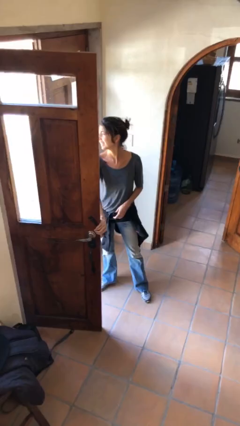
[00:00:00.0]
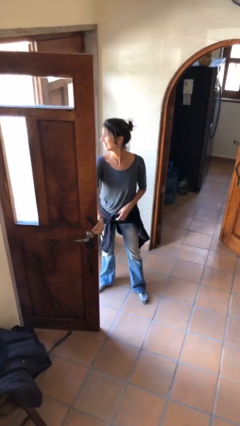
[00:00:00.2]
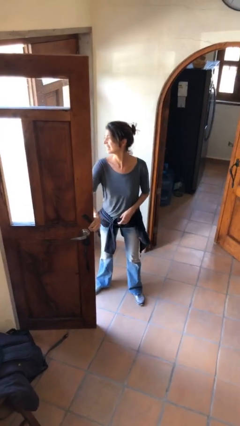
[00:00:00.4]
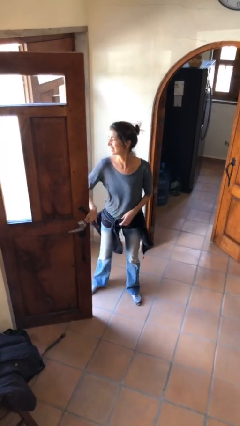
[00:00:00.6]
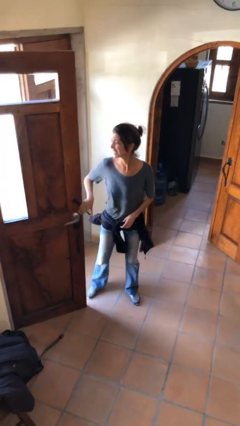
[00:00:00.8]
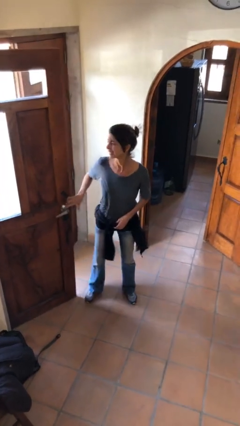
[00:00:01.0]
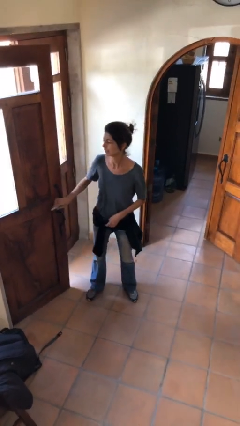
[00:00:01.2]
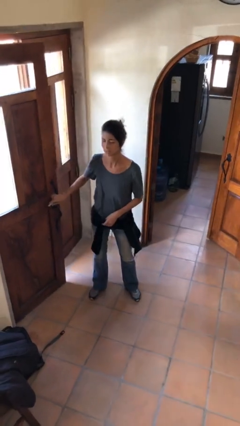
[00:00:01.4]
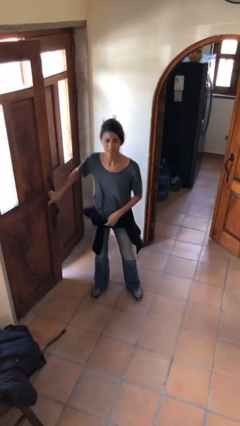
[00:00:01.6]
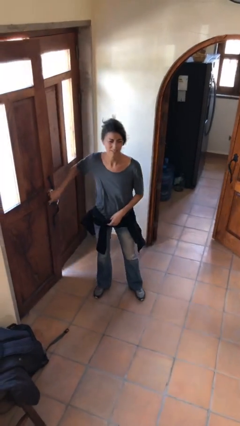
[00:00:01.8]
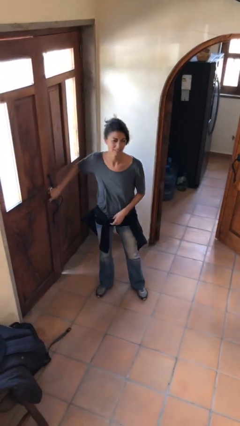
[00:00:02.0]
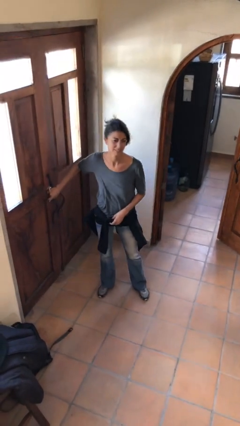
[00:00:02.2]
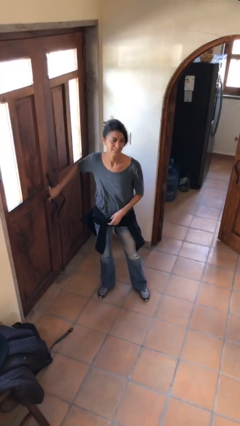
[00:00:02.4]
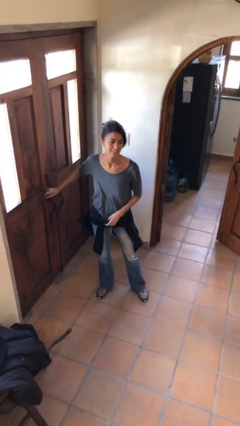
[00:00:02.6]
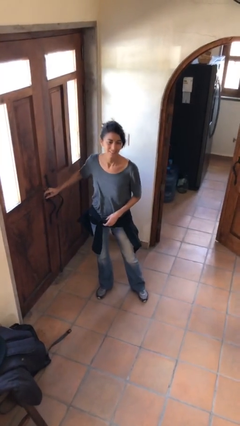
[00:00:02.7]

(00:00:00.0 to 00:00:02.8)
person closes facility door

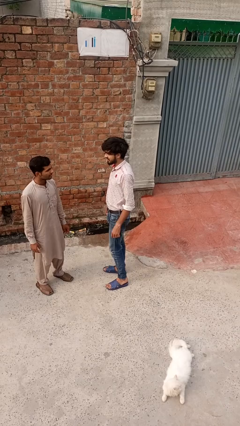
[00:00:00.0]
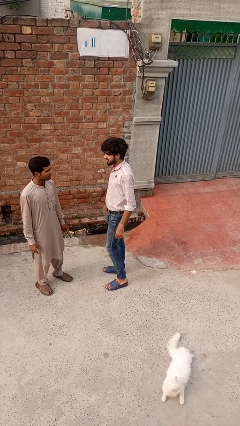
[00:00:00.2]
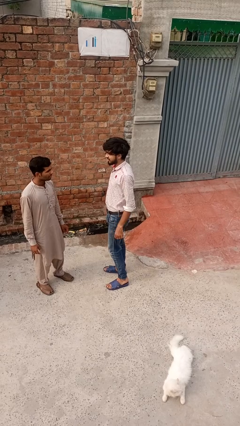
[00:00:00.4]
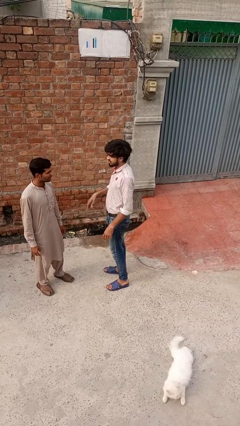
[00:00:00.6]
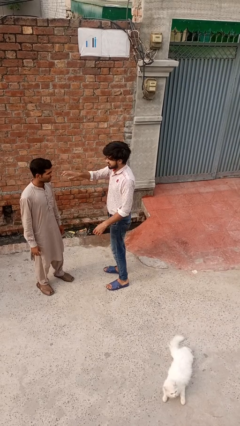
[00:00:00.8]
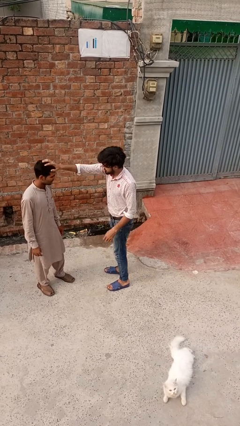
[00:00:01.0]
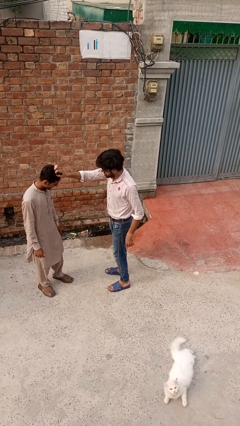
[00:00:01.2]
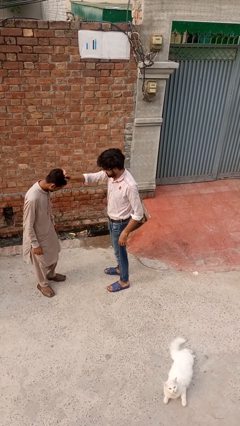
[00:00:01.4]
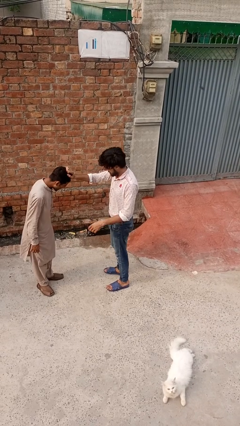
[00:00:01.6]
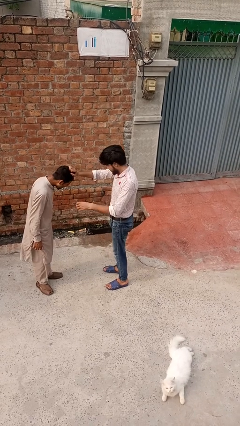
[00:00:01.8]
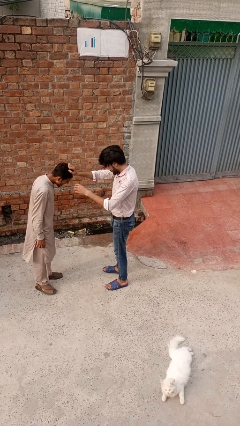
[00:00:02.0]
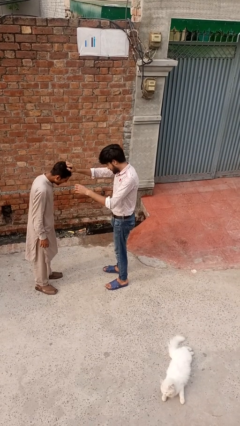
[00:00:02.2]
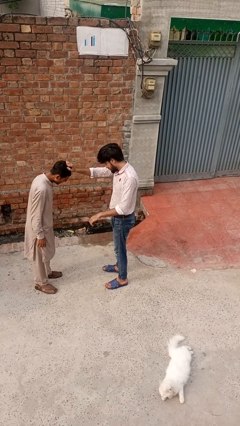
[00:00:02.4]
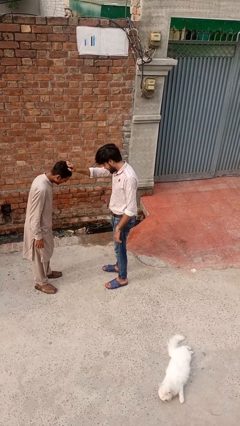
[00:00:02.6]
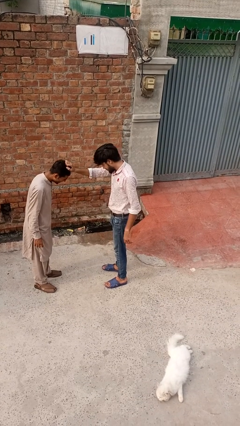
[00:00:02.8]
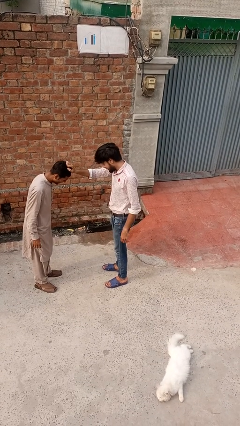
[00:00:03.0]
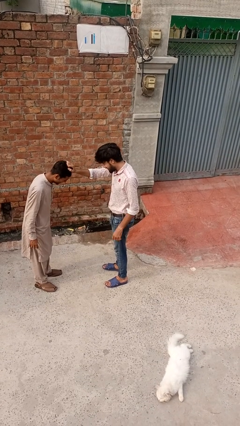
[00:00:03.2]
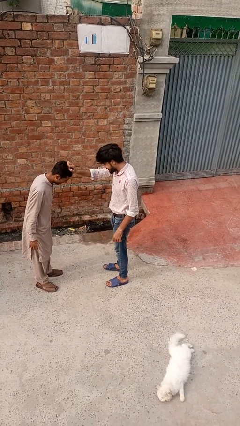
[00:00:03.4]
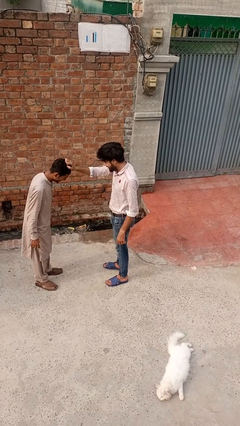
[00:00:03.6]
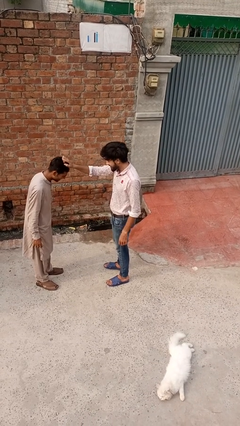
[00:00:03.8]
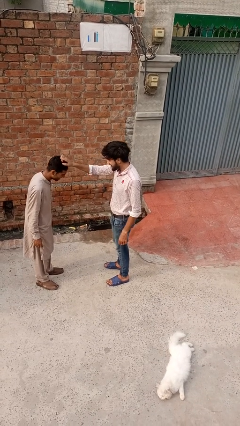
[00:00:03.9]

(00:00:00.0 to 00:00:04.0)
person grabs person by hair

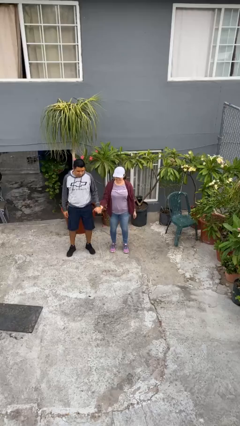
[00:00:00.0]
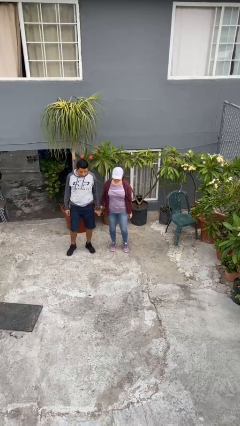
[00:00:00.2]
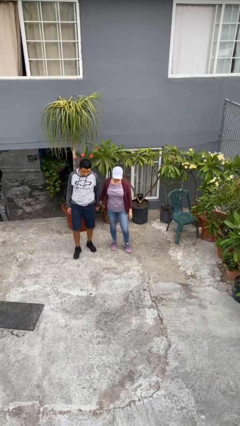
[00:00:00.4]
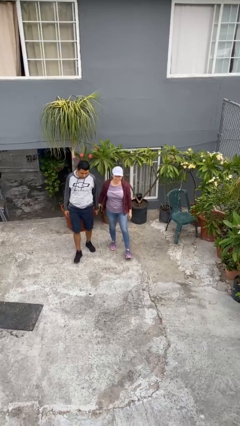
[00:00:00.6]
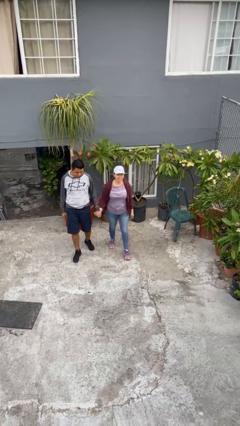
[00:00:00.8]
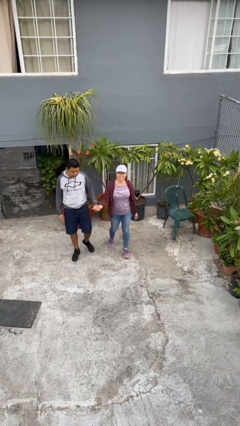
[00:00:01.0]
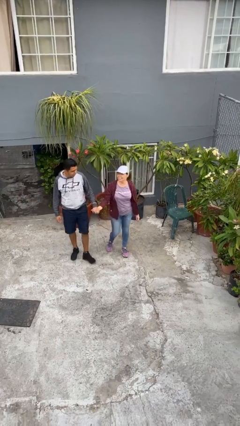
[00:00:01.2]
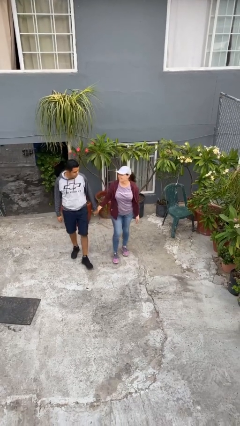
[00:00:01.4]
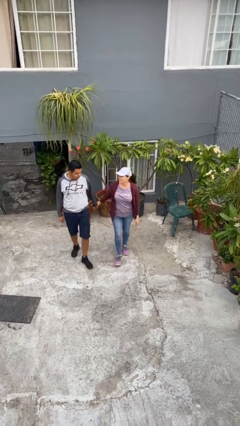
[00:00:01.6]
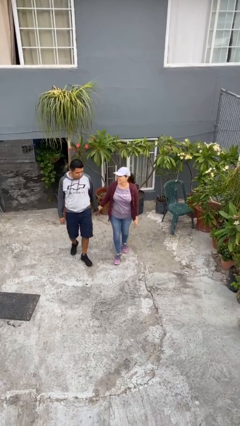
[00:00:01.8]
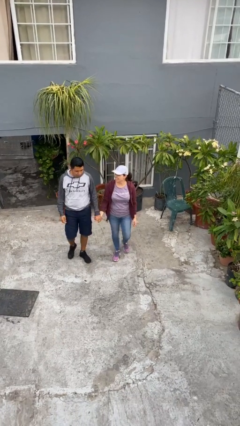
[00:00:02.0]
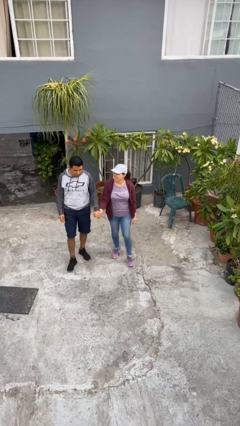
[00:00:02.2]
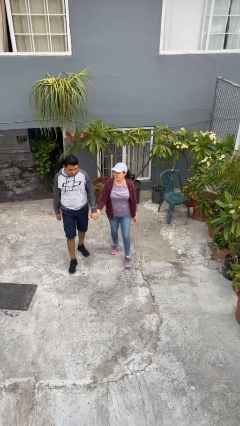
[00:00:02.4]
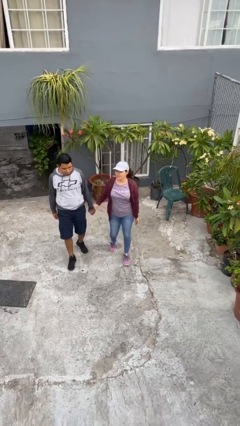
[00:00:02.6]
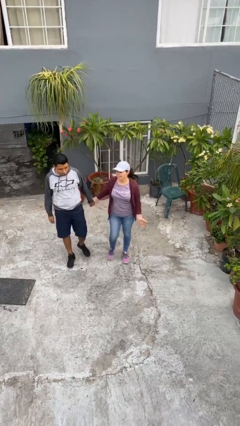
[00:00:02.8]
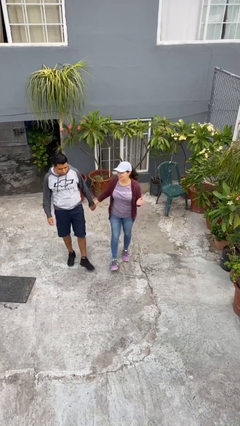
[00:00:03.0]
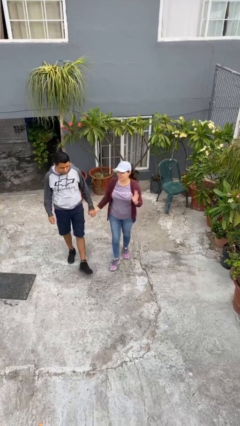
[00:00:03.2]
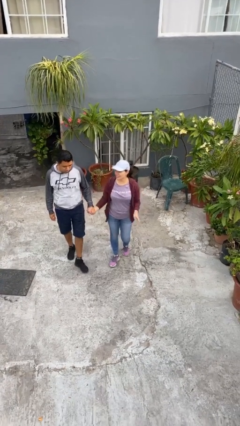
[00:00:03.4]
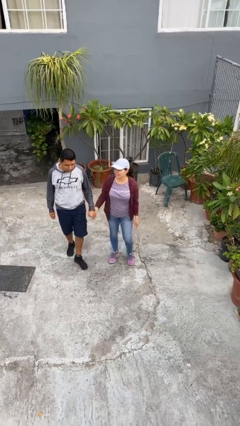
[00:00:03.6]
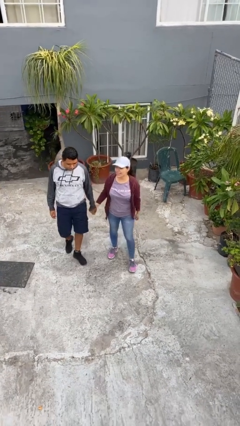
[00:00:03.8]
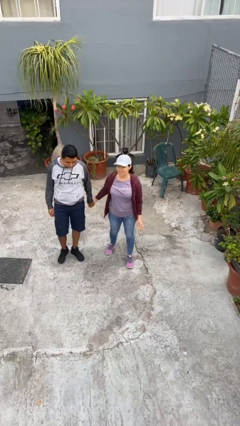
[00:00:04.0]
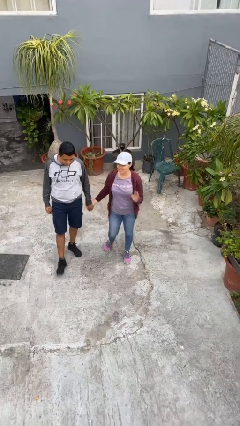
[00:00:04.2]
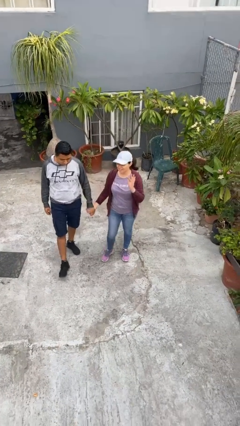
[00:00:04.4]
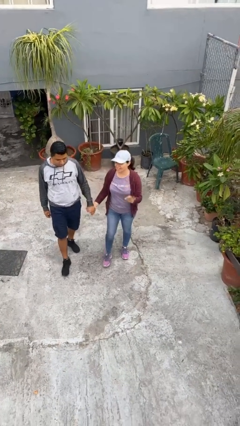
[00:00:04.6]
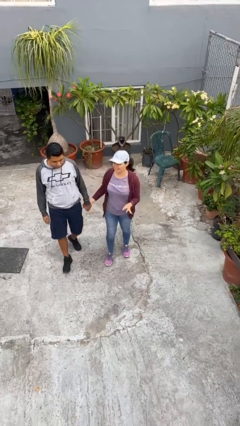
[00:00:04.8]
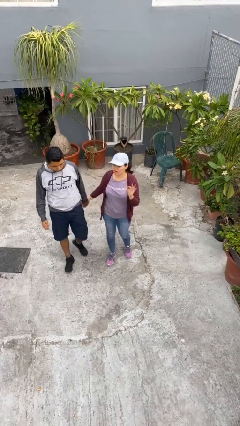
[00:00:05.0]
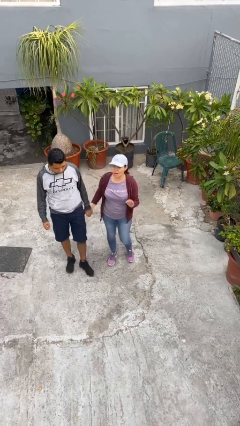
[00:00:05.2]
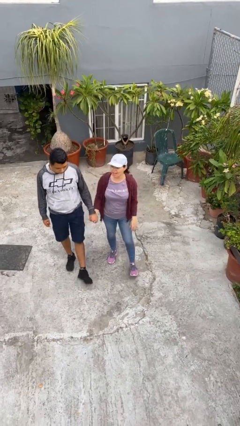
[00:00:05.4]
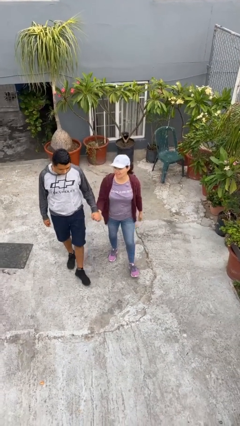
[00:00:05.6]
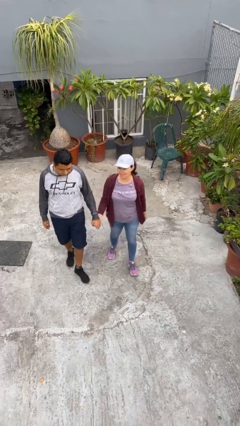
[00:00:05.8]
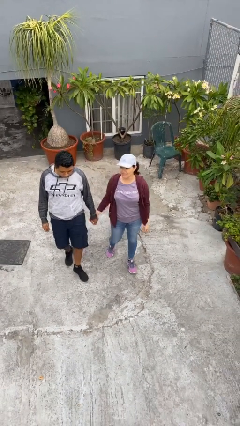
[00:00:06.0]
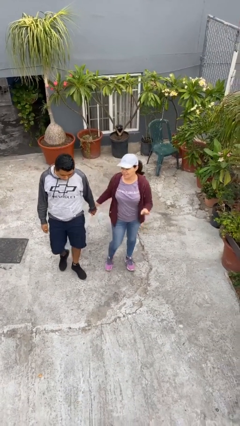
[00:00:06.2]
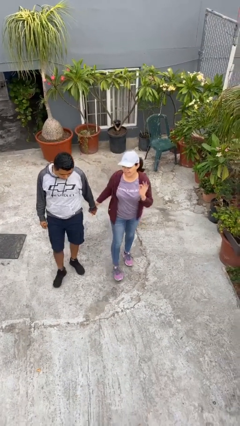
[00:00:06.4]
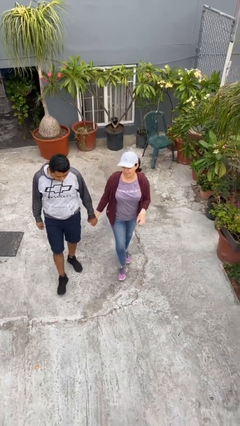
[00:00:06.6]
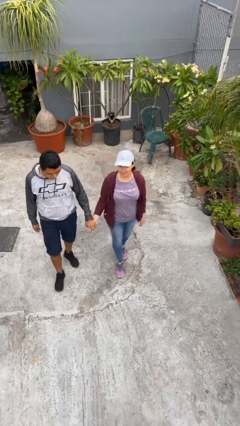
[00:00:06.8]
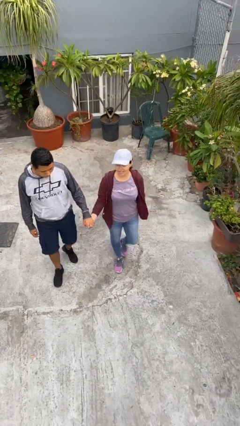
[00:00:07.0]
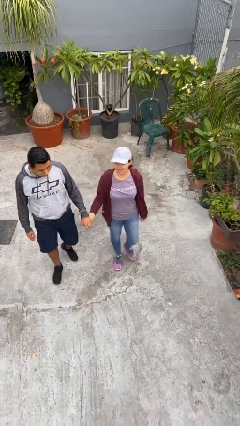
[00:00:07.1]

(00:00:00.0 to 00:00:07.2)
person holds hand

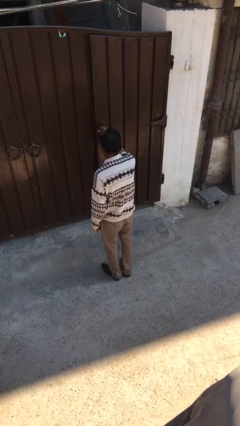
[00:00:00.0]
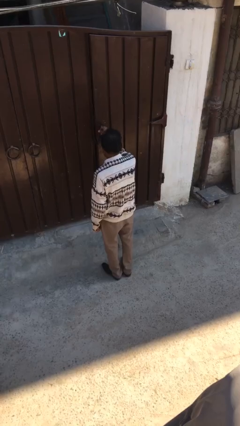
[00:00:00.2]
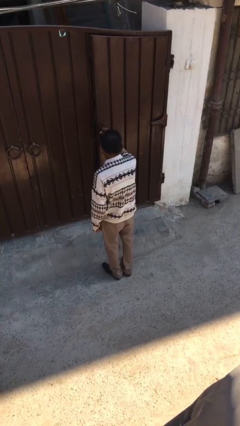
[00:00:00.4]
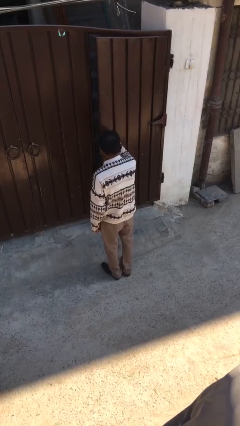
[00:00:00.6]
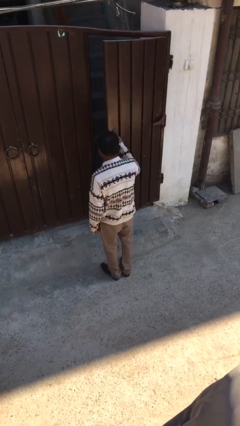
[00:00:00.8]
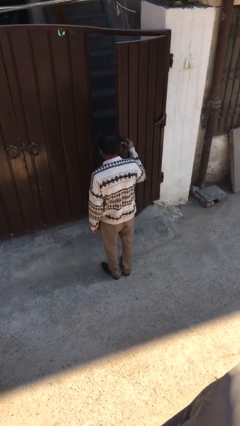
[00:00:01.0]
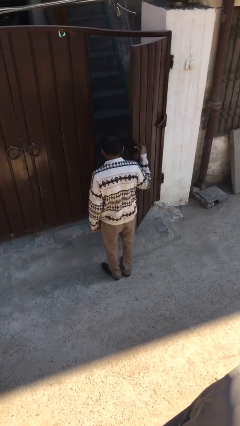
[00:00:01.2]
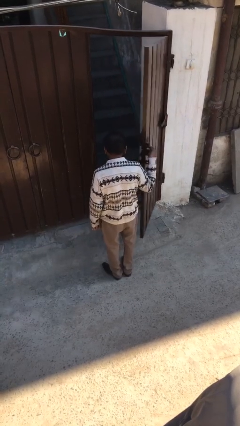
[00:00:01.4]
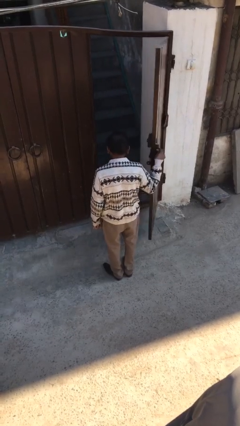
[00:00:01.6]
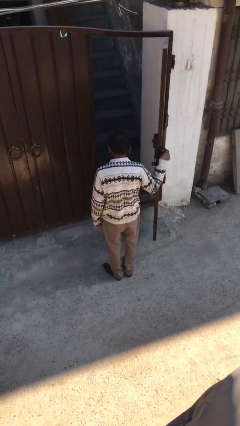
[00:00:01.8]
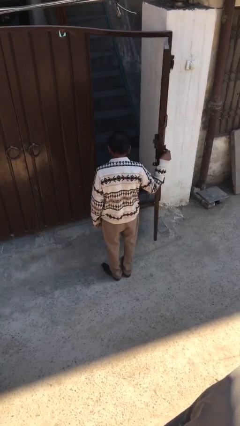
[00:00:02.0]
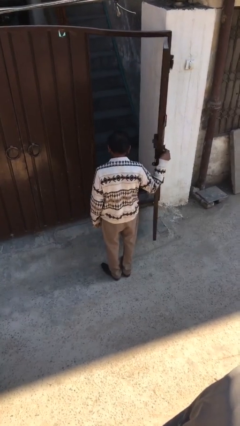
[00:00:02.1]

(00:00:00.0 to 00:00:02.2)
person opens facility door

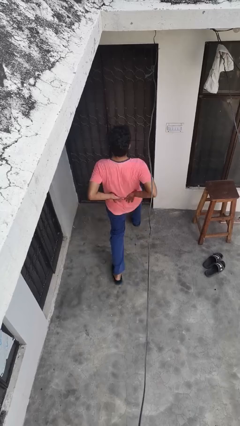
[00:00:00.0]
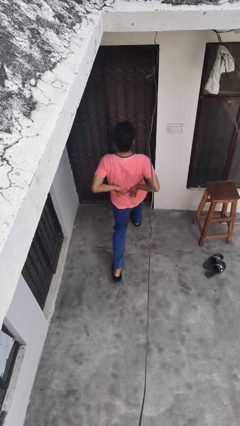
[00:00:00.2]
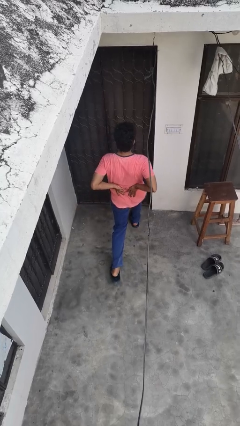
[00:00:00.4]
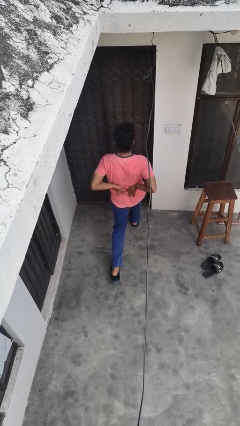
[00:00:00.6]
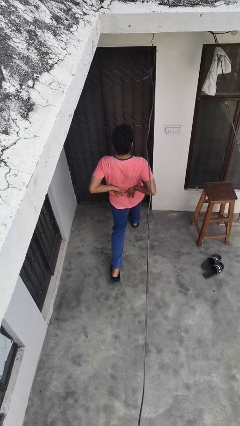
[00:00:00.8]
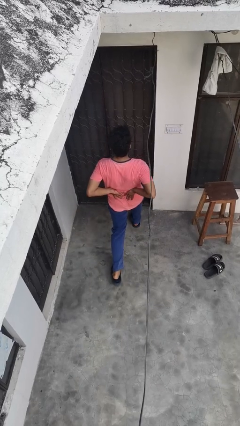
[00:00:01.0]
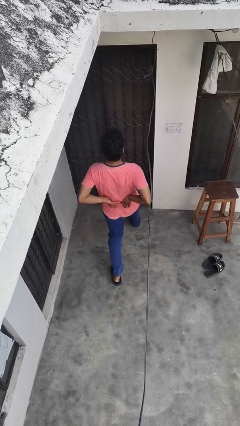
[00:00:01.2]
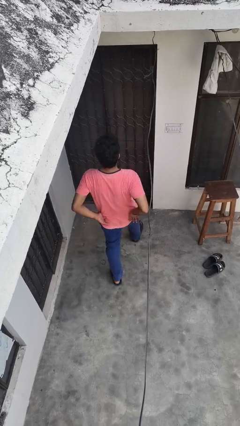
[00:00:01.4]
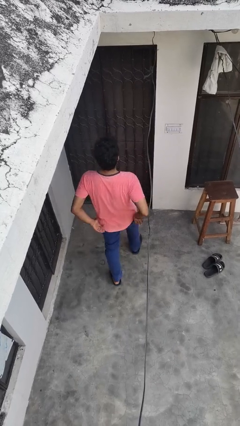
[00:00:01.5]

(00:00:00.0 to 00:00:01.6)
person exercises with lunges
